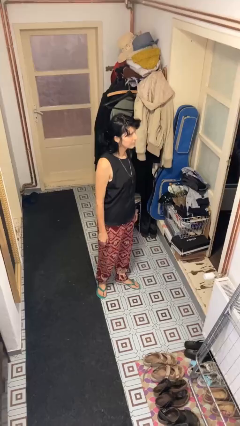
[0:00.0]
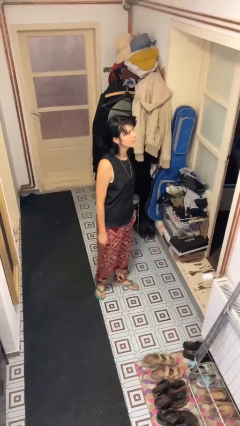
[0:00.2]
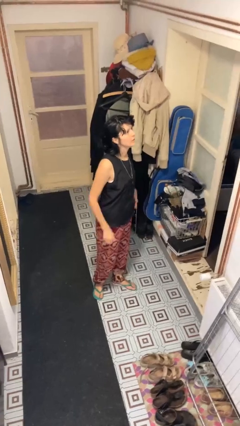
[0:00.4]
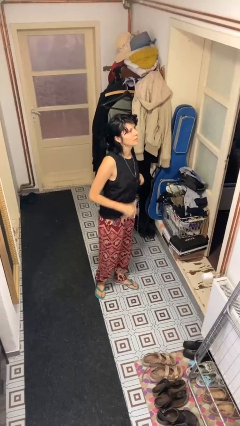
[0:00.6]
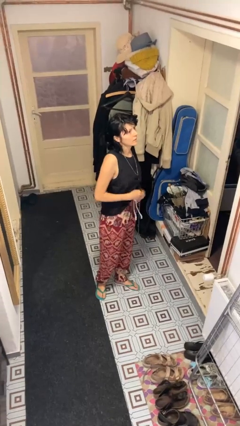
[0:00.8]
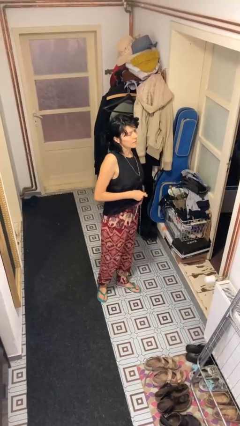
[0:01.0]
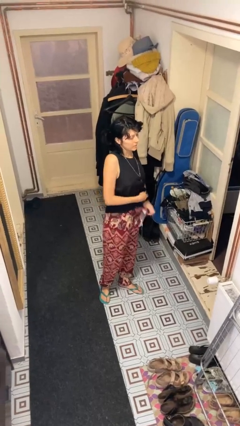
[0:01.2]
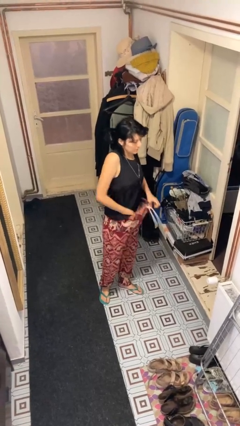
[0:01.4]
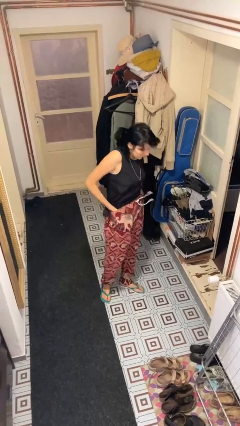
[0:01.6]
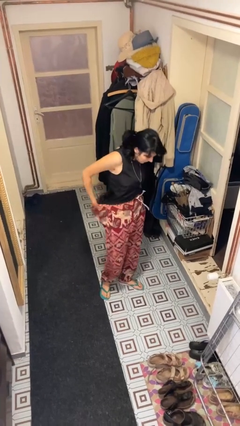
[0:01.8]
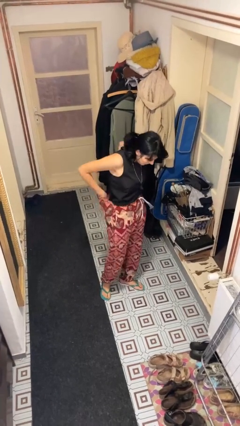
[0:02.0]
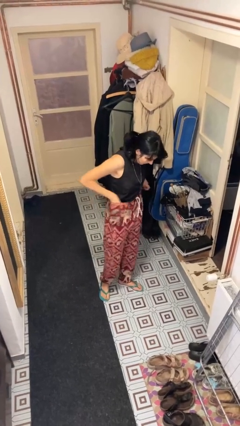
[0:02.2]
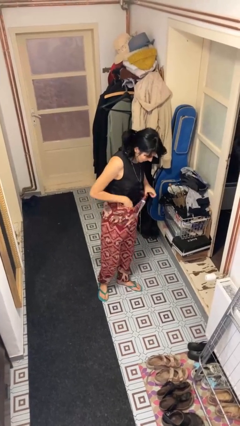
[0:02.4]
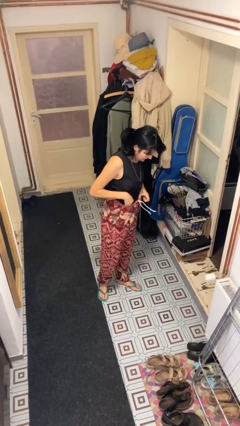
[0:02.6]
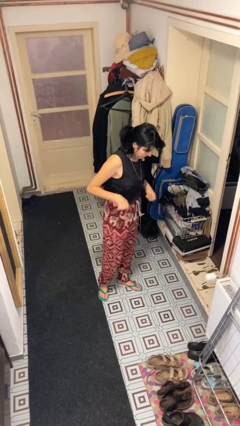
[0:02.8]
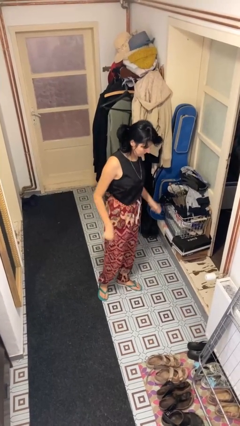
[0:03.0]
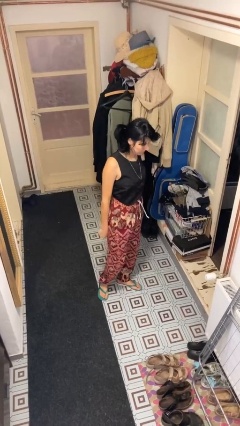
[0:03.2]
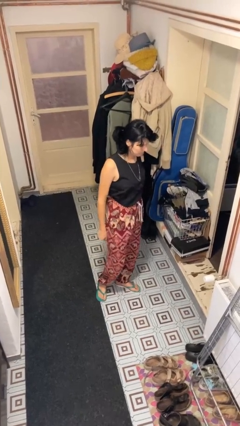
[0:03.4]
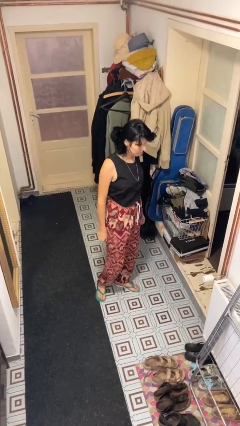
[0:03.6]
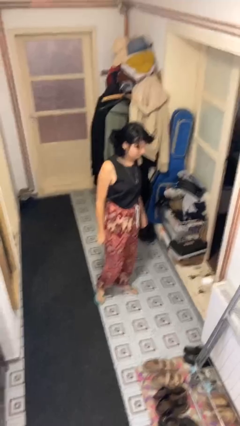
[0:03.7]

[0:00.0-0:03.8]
person tucks in shirt

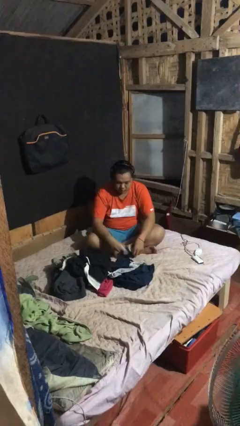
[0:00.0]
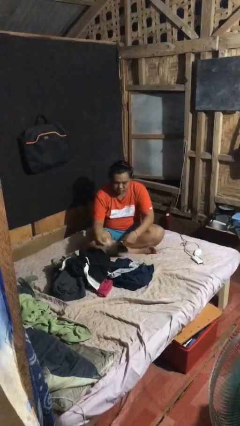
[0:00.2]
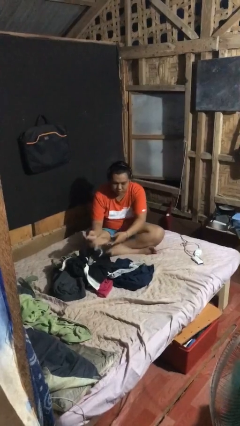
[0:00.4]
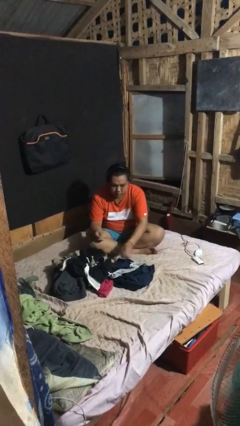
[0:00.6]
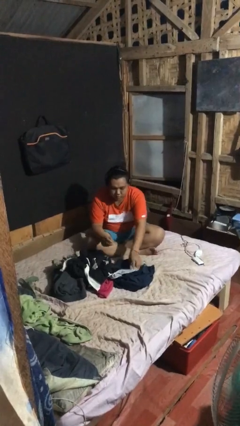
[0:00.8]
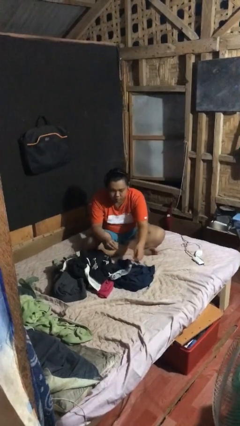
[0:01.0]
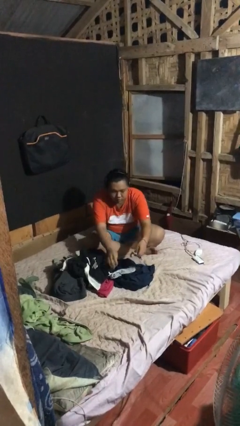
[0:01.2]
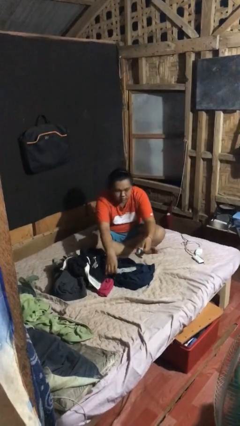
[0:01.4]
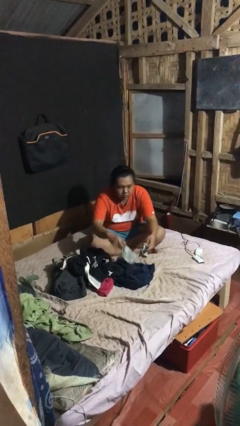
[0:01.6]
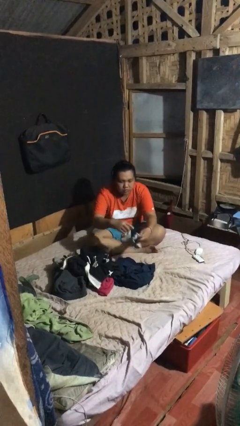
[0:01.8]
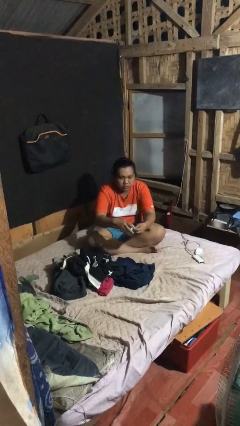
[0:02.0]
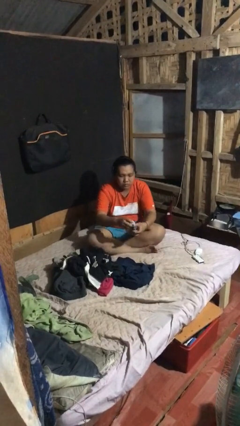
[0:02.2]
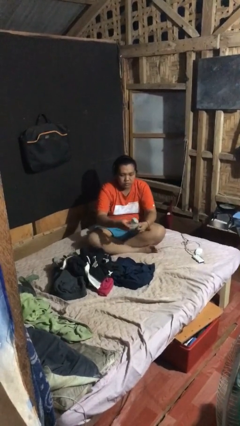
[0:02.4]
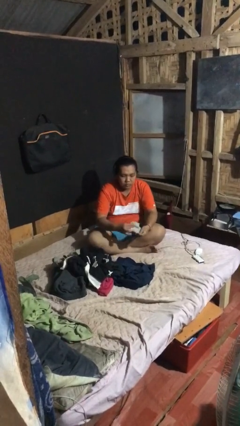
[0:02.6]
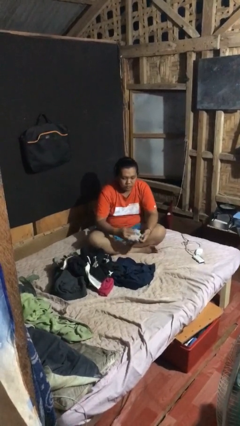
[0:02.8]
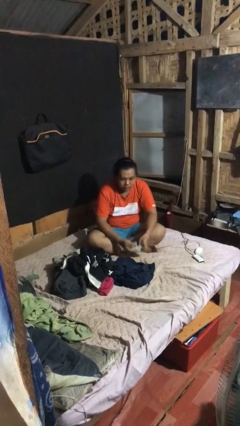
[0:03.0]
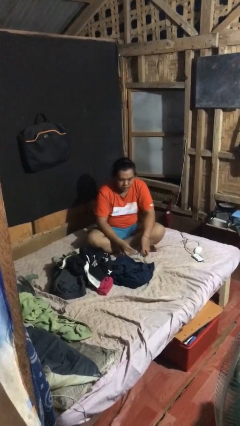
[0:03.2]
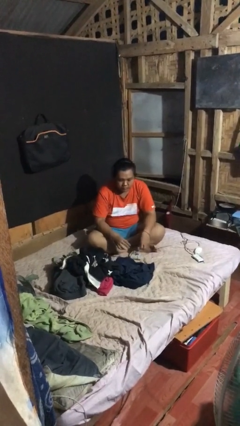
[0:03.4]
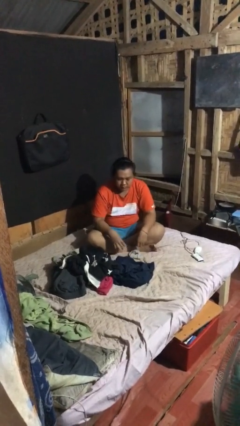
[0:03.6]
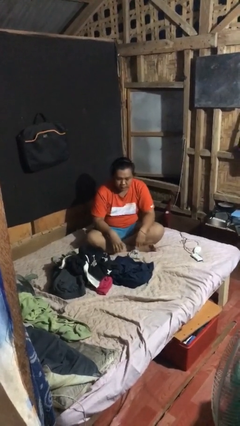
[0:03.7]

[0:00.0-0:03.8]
person folds socks

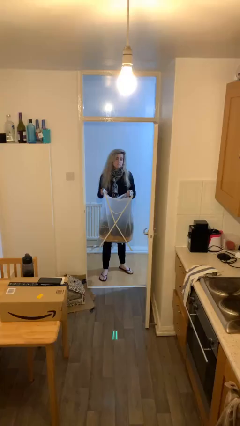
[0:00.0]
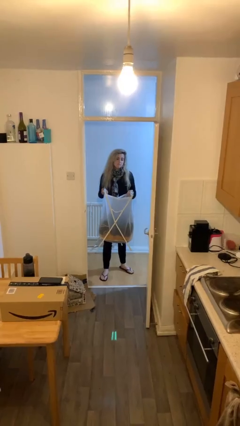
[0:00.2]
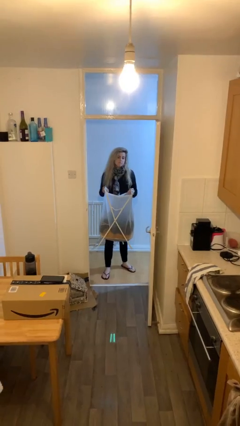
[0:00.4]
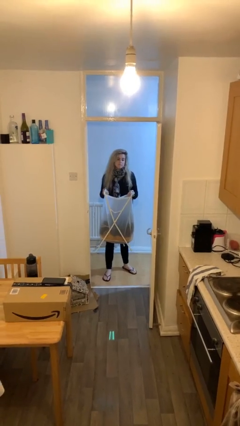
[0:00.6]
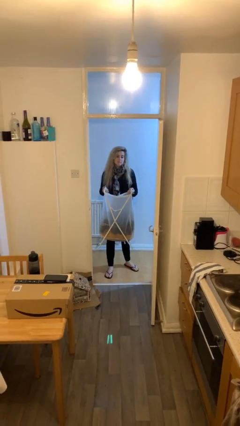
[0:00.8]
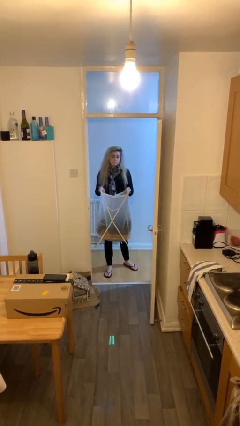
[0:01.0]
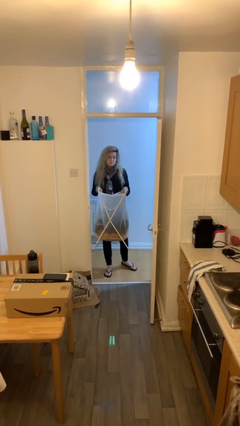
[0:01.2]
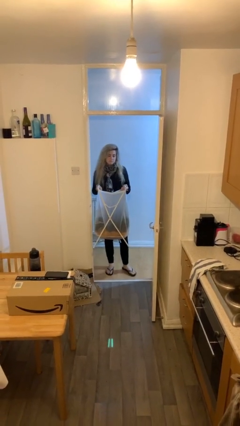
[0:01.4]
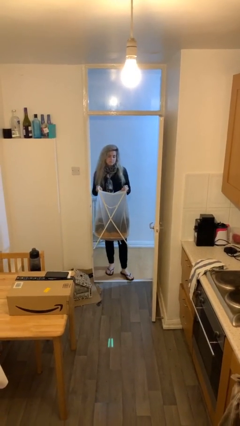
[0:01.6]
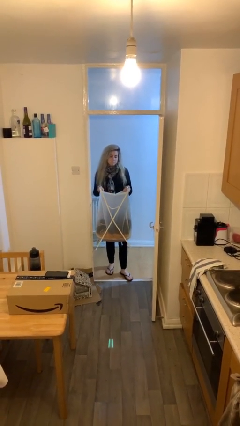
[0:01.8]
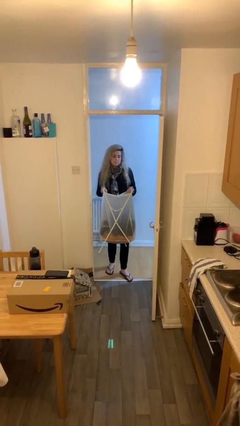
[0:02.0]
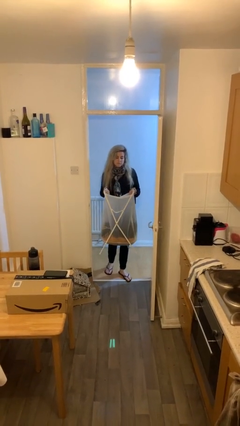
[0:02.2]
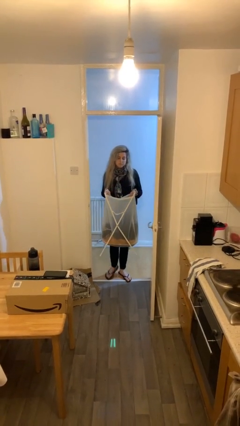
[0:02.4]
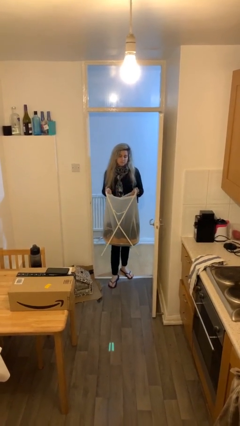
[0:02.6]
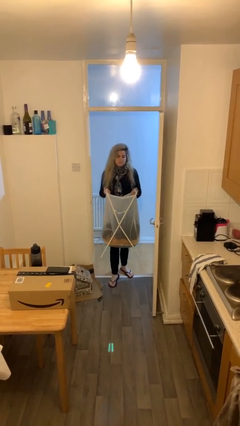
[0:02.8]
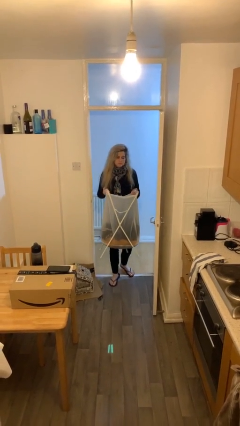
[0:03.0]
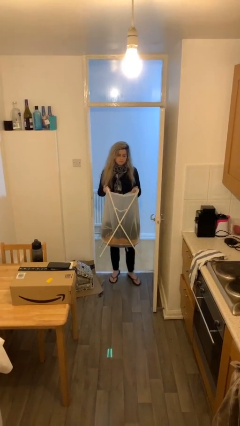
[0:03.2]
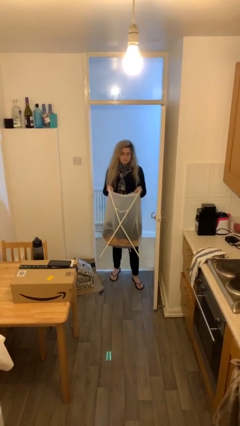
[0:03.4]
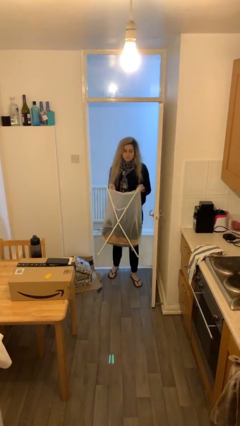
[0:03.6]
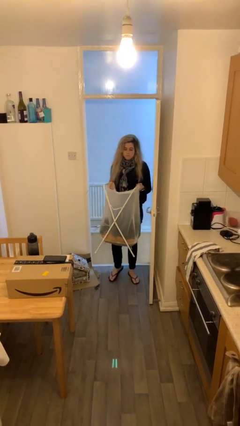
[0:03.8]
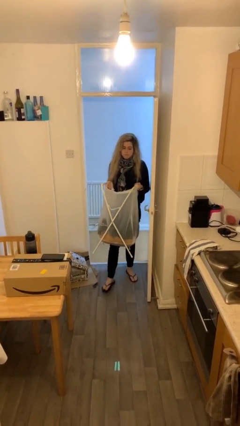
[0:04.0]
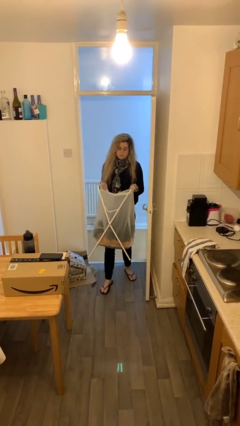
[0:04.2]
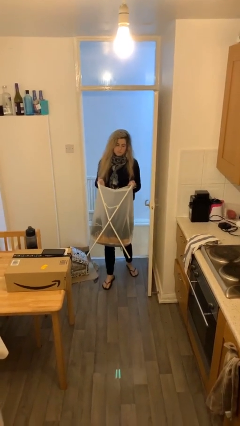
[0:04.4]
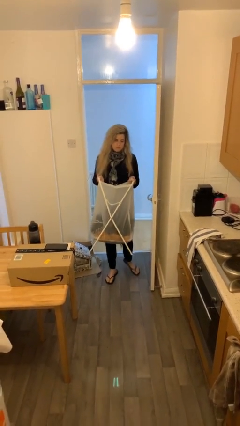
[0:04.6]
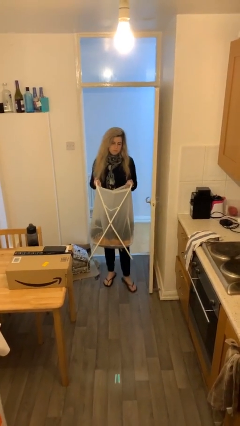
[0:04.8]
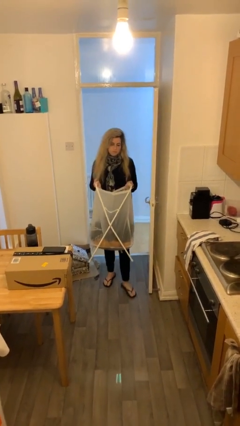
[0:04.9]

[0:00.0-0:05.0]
person carries heavy object

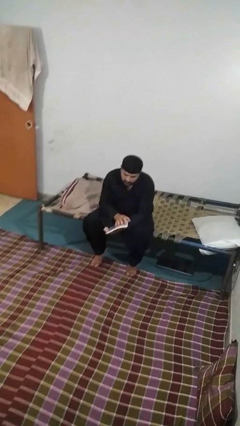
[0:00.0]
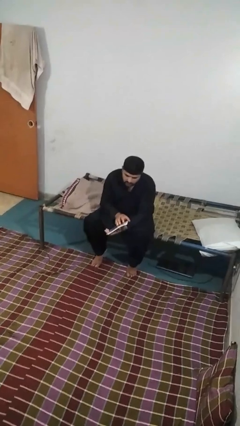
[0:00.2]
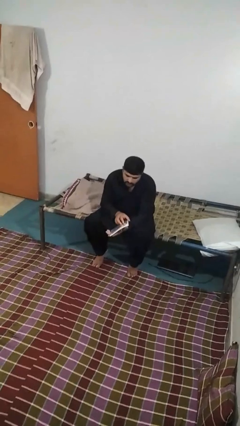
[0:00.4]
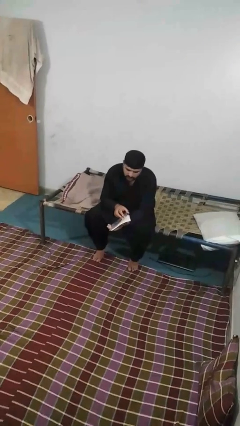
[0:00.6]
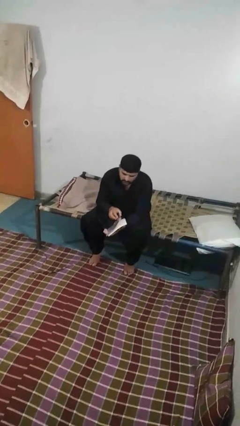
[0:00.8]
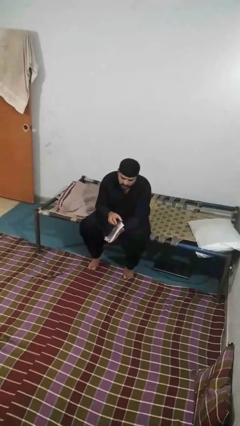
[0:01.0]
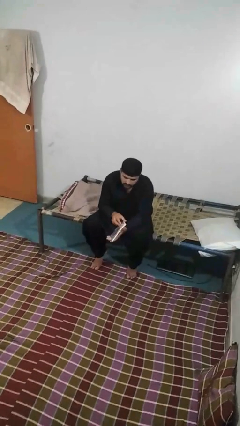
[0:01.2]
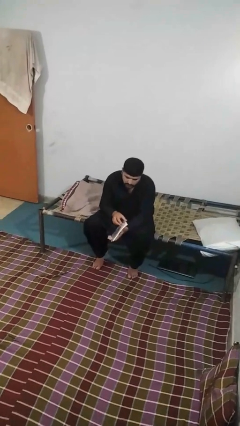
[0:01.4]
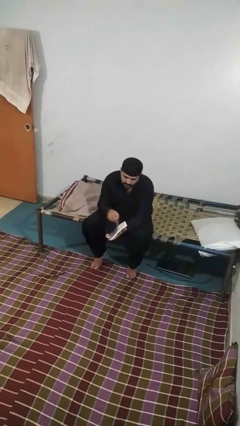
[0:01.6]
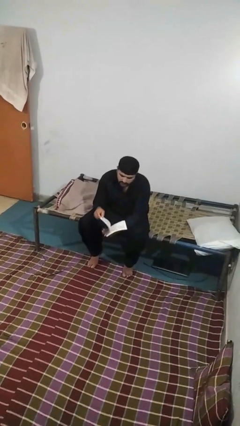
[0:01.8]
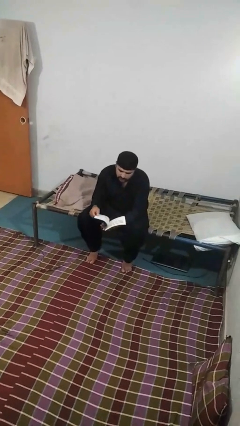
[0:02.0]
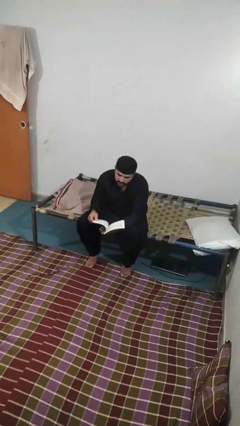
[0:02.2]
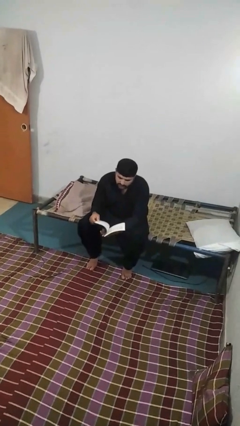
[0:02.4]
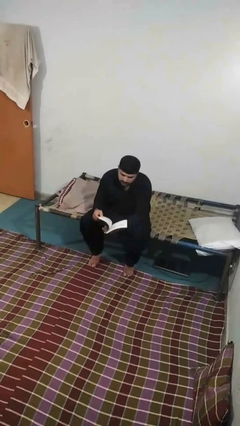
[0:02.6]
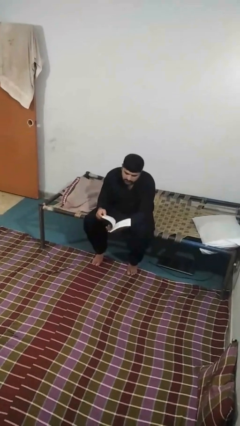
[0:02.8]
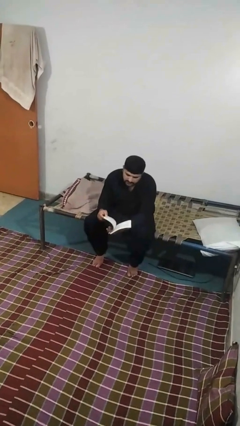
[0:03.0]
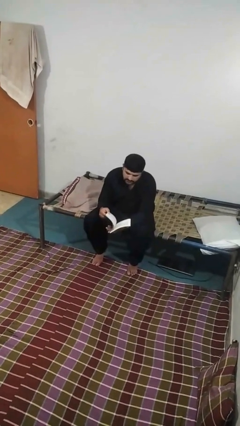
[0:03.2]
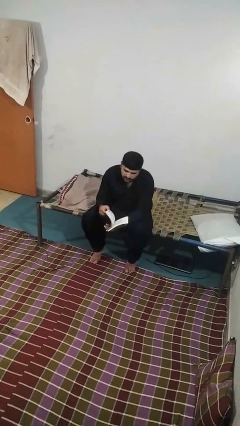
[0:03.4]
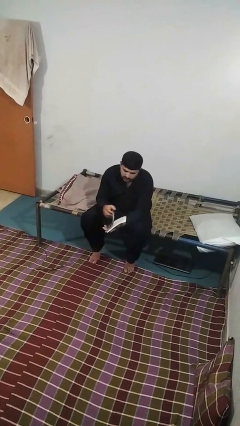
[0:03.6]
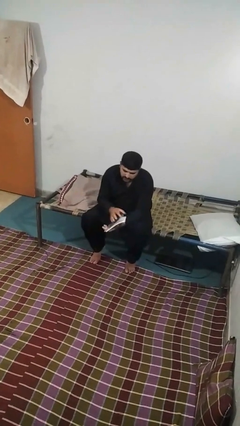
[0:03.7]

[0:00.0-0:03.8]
person reads book

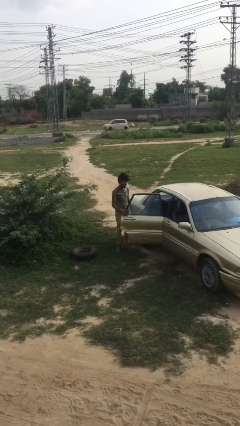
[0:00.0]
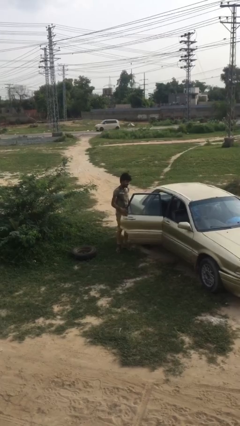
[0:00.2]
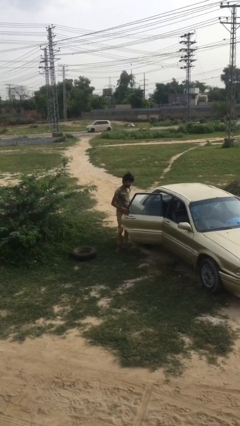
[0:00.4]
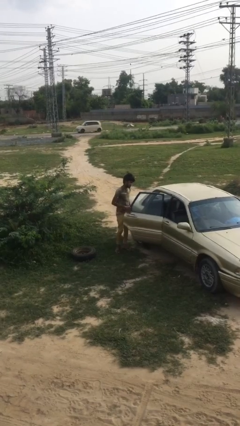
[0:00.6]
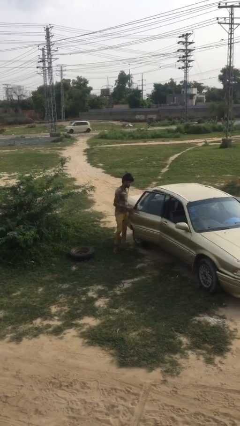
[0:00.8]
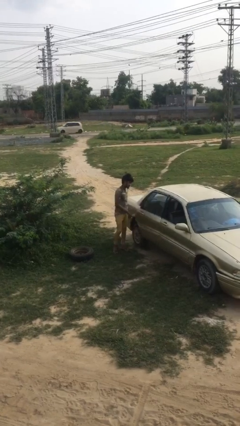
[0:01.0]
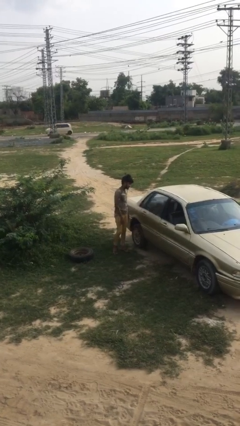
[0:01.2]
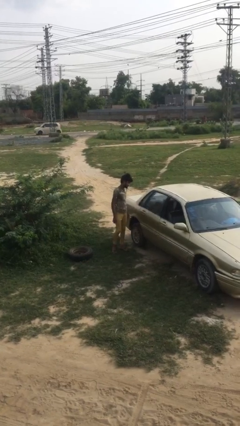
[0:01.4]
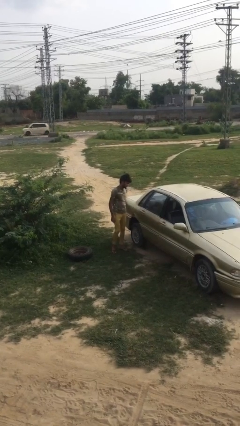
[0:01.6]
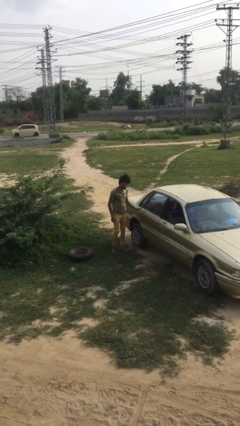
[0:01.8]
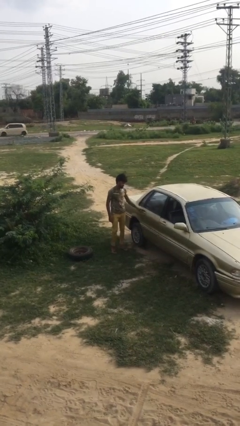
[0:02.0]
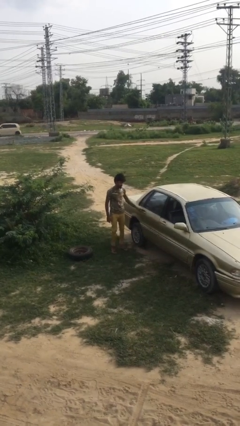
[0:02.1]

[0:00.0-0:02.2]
person closes car door
